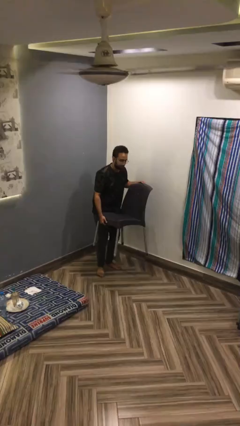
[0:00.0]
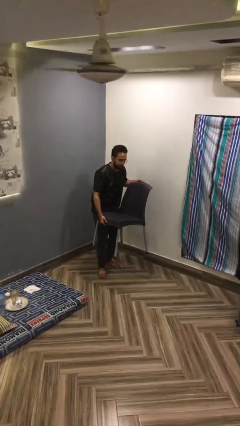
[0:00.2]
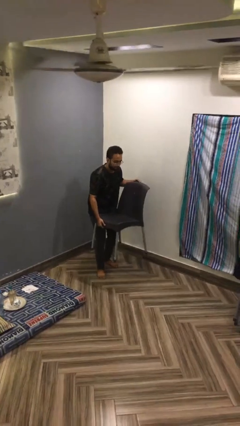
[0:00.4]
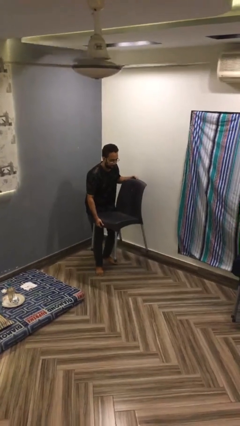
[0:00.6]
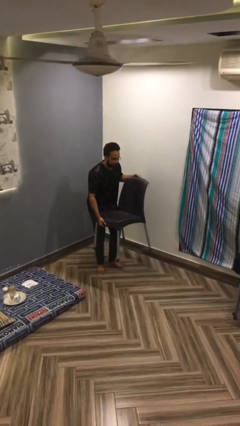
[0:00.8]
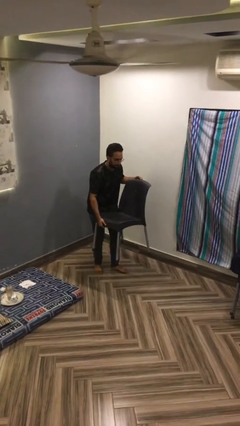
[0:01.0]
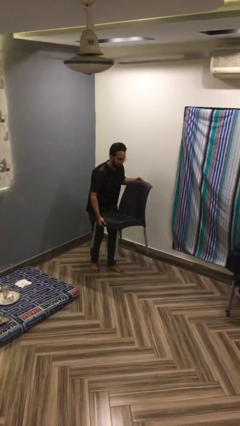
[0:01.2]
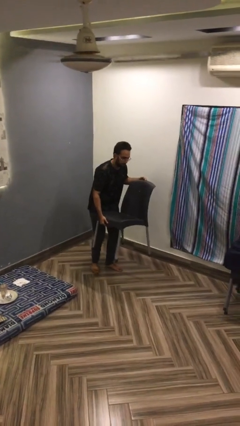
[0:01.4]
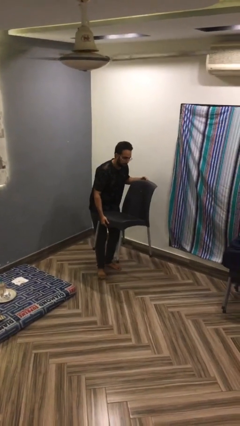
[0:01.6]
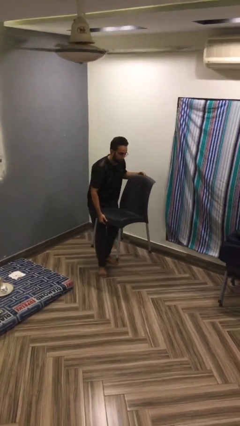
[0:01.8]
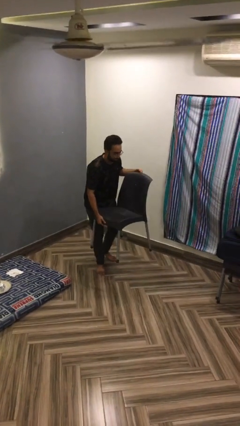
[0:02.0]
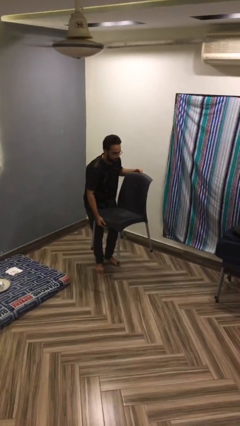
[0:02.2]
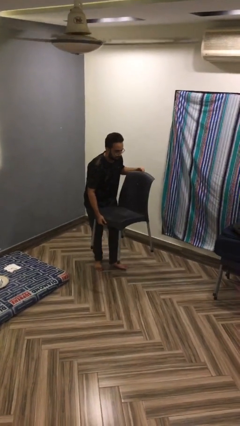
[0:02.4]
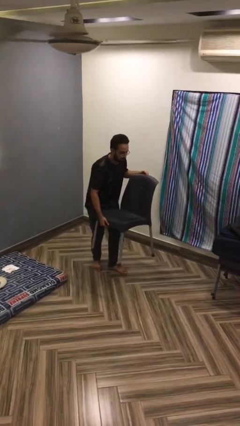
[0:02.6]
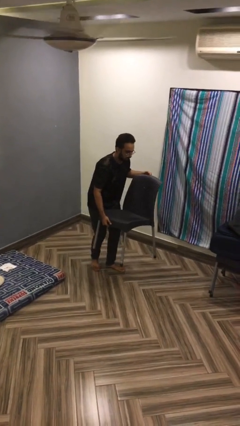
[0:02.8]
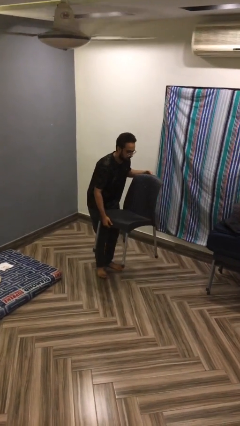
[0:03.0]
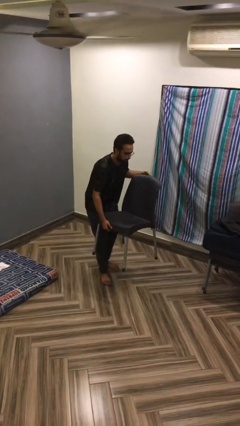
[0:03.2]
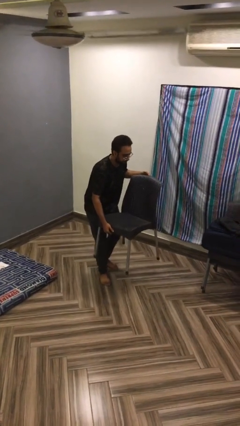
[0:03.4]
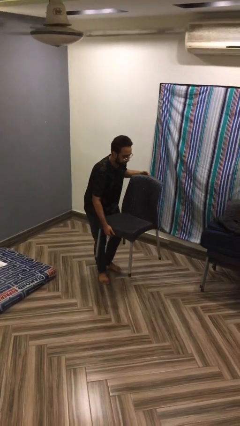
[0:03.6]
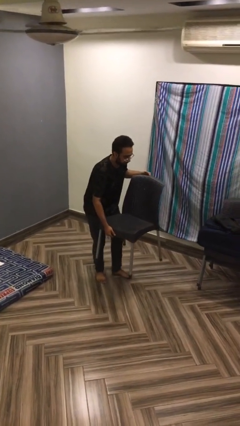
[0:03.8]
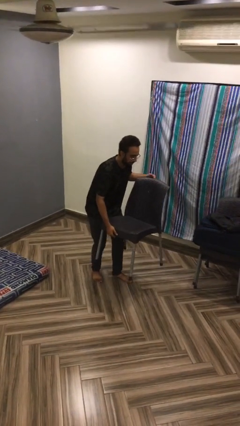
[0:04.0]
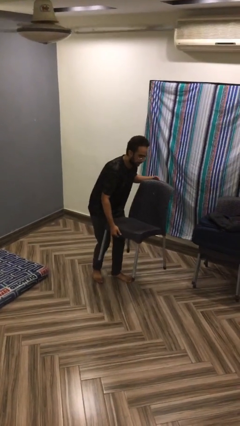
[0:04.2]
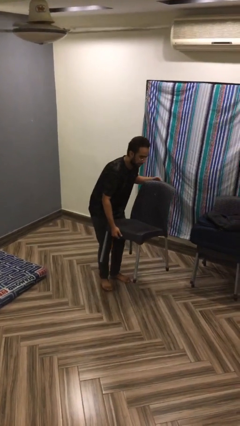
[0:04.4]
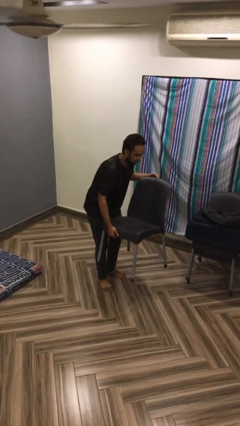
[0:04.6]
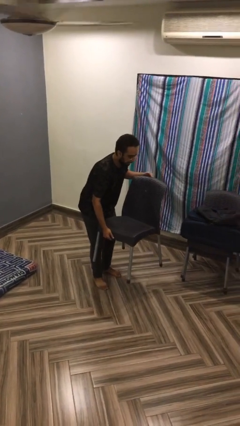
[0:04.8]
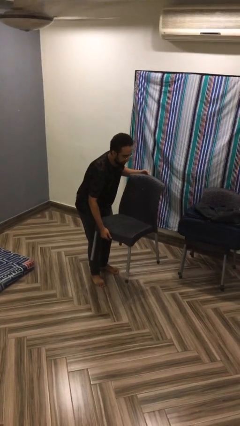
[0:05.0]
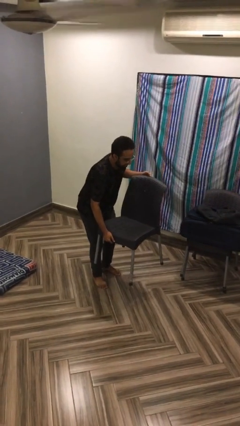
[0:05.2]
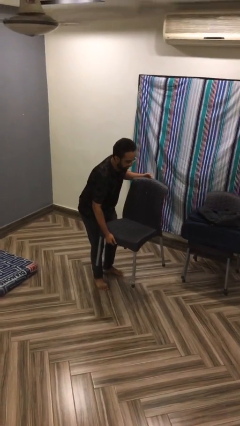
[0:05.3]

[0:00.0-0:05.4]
person carries heavy object

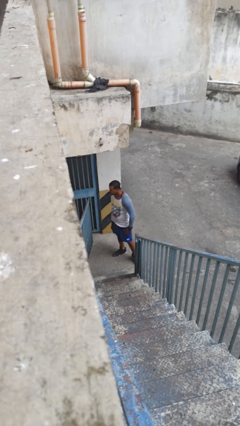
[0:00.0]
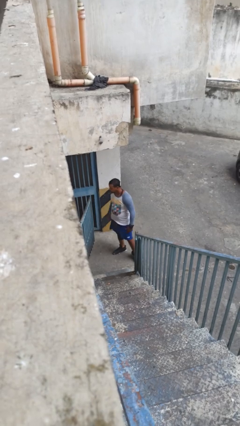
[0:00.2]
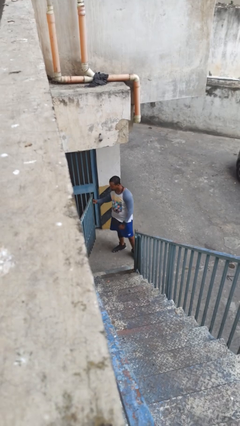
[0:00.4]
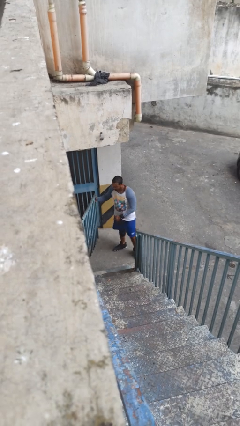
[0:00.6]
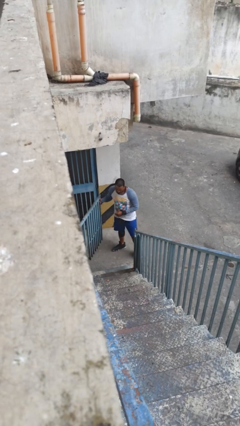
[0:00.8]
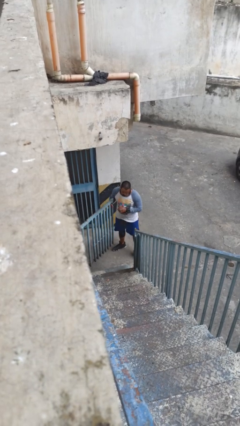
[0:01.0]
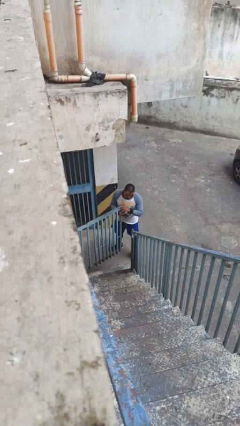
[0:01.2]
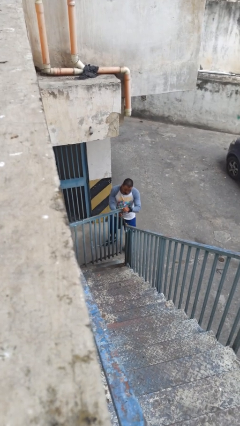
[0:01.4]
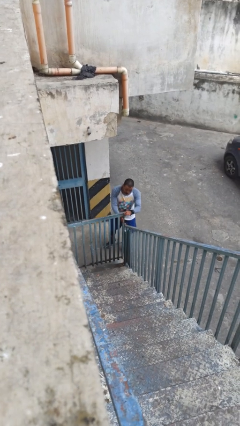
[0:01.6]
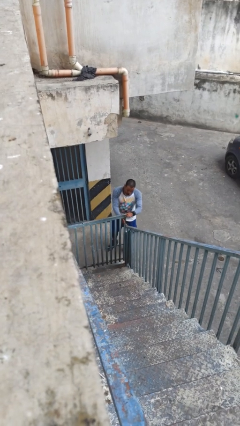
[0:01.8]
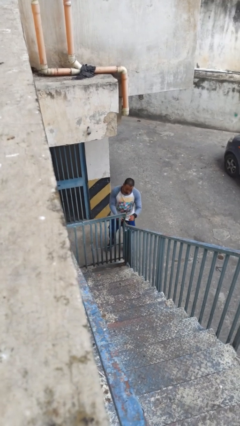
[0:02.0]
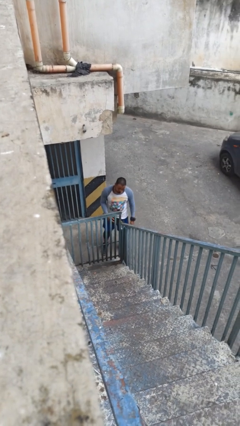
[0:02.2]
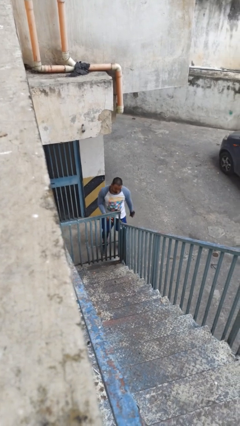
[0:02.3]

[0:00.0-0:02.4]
person closes facility door

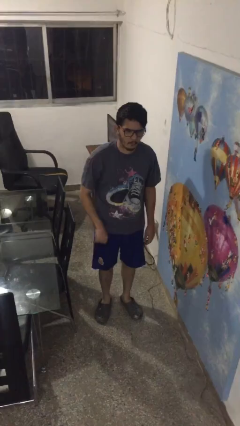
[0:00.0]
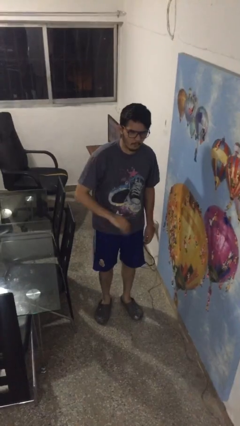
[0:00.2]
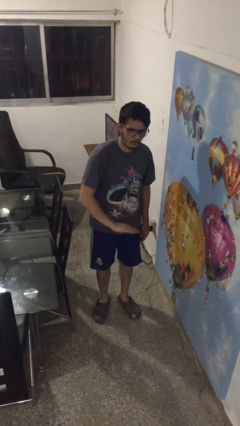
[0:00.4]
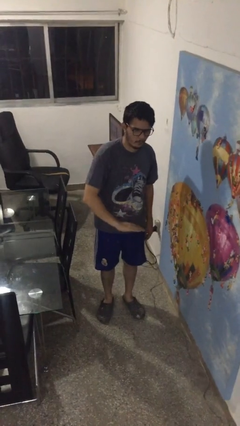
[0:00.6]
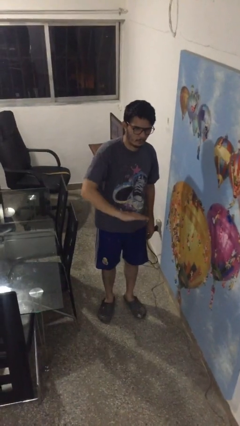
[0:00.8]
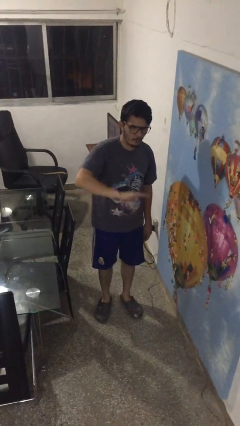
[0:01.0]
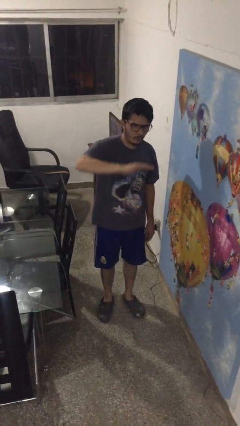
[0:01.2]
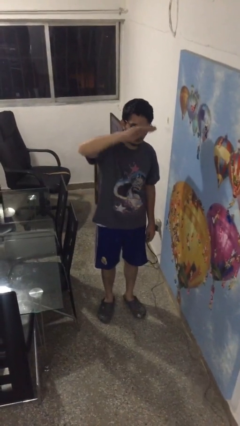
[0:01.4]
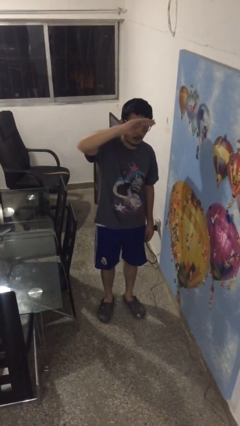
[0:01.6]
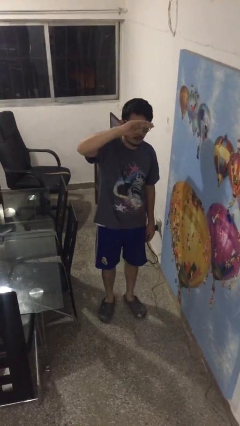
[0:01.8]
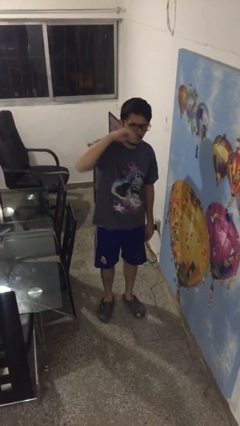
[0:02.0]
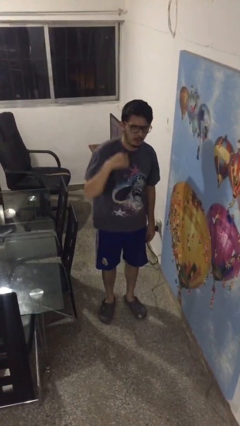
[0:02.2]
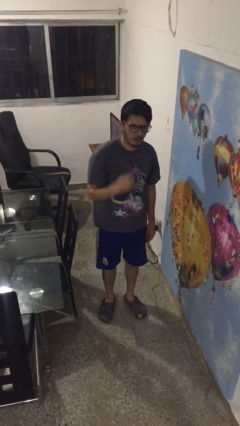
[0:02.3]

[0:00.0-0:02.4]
person gestures swipe up

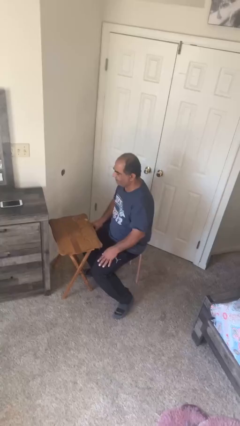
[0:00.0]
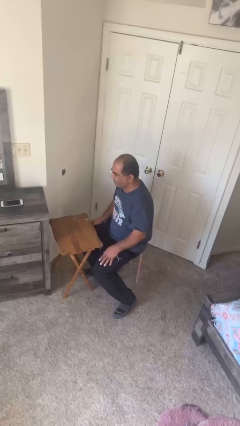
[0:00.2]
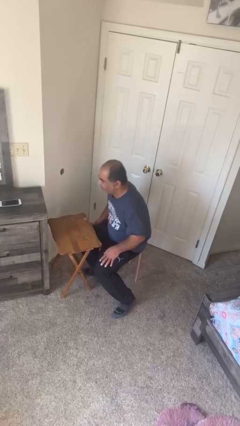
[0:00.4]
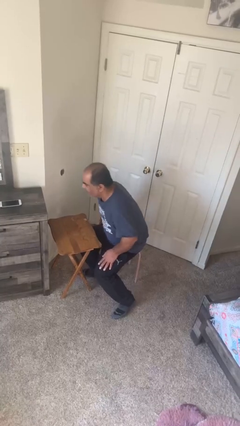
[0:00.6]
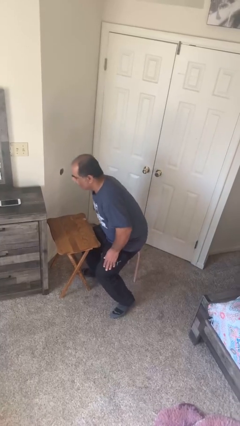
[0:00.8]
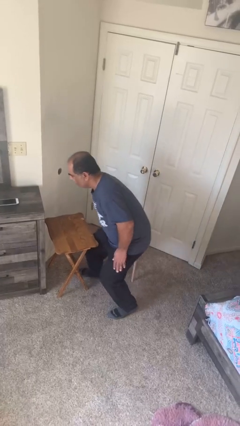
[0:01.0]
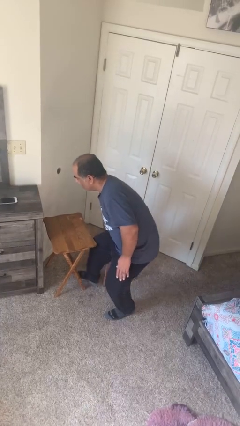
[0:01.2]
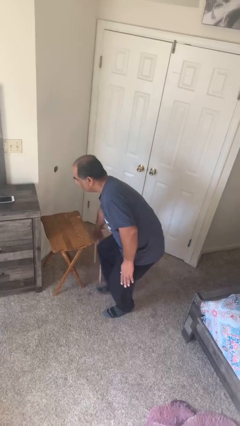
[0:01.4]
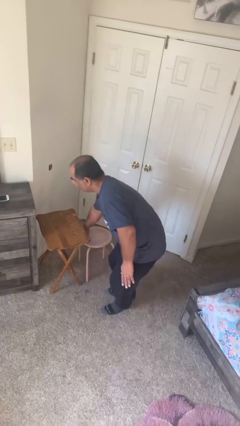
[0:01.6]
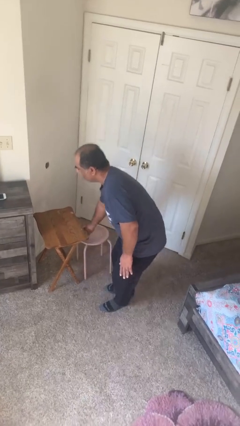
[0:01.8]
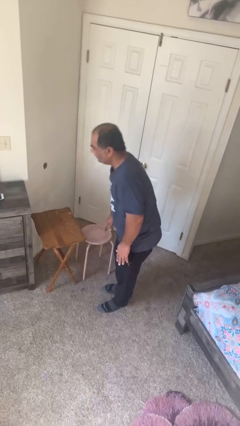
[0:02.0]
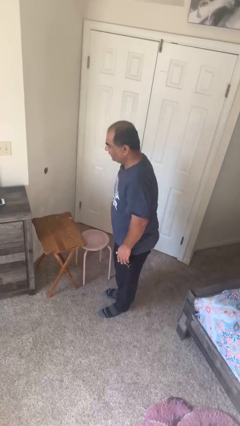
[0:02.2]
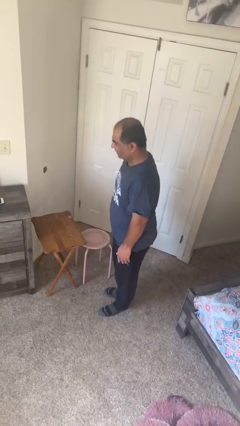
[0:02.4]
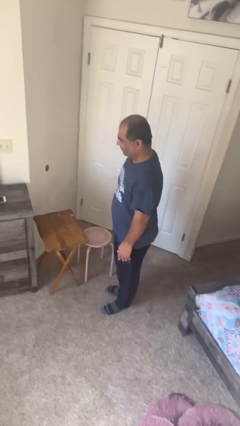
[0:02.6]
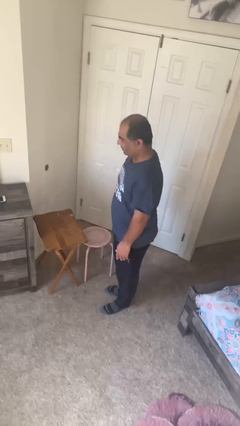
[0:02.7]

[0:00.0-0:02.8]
person stands up

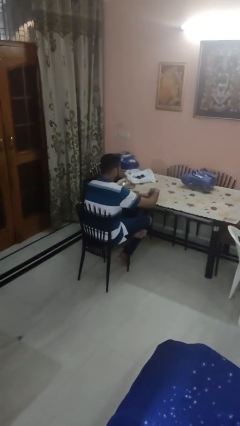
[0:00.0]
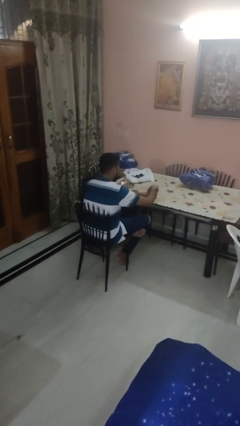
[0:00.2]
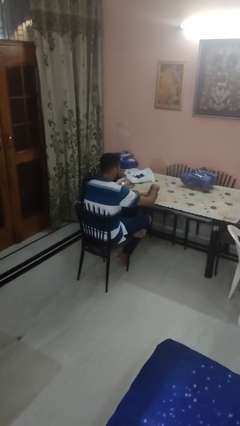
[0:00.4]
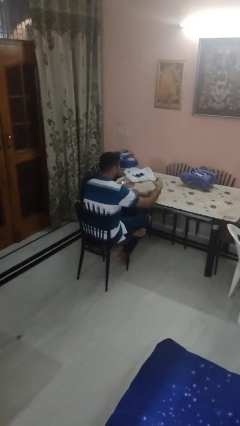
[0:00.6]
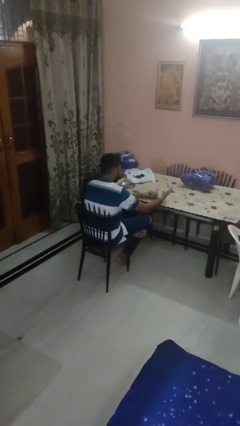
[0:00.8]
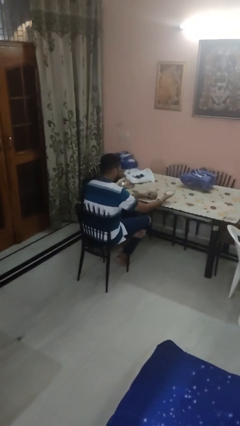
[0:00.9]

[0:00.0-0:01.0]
person opens jar

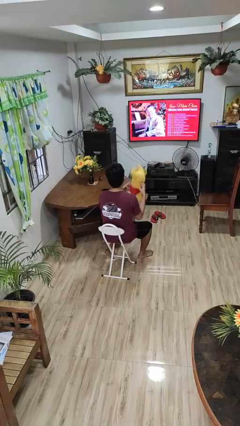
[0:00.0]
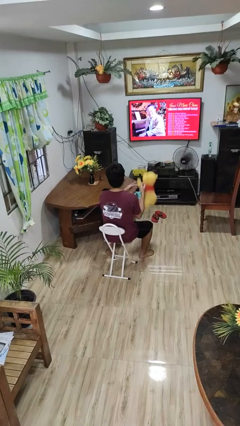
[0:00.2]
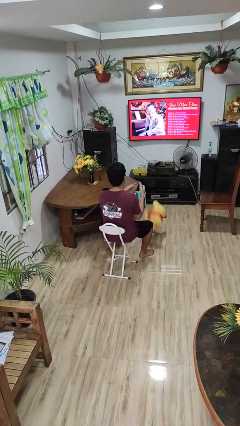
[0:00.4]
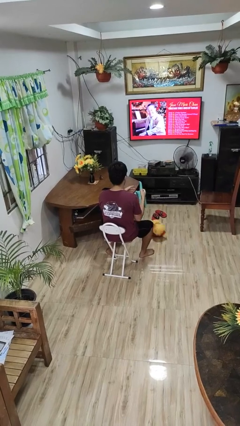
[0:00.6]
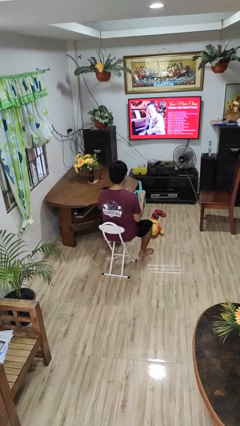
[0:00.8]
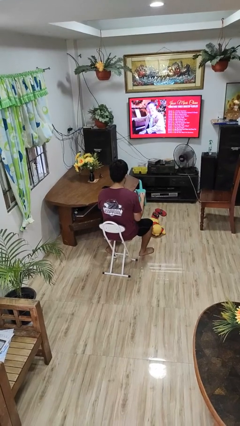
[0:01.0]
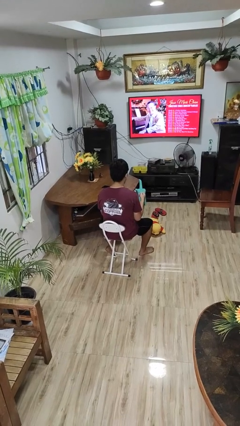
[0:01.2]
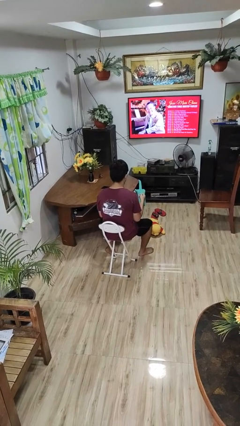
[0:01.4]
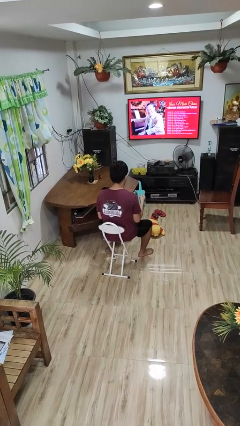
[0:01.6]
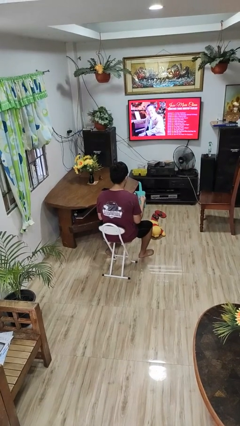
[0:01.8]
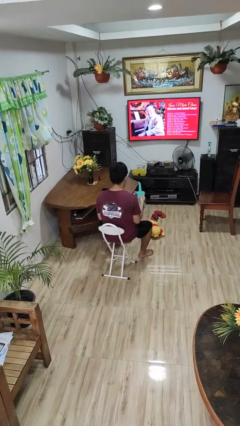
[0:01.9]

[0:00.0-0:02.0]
person drops object

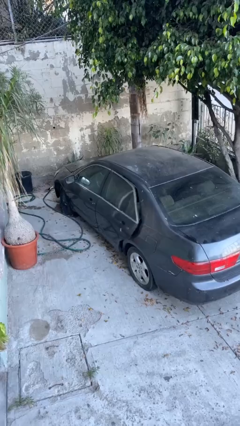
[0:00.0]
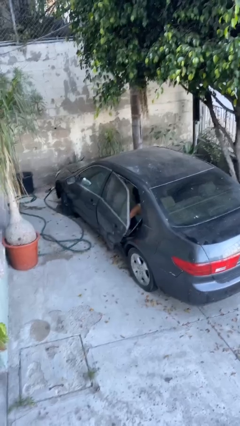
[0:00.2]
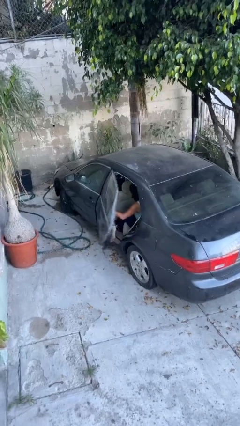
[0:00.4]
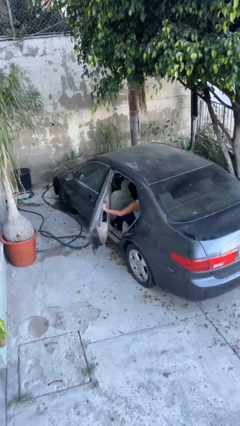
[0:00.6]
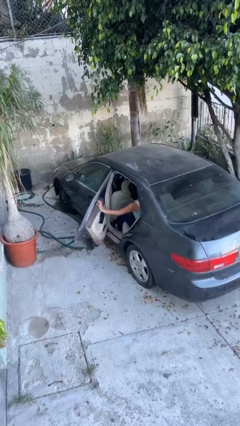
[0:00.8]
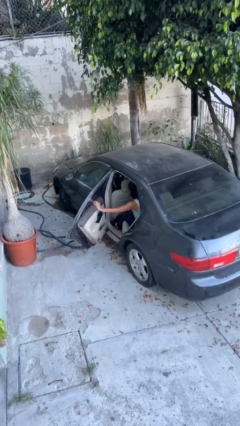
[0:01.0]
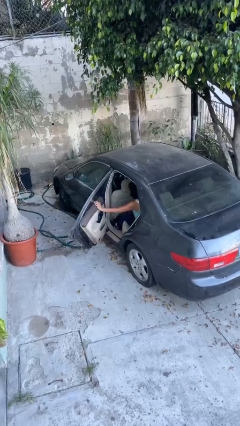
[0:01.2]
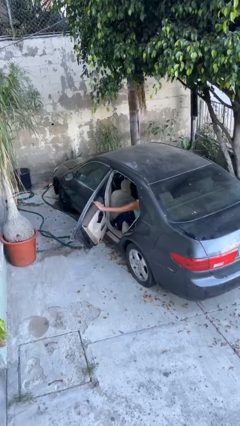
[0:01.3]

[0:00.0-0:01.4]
person opens car door

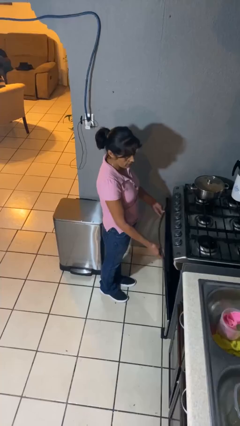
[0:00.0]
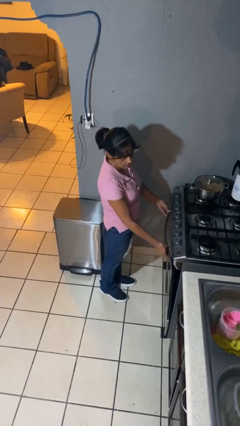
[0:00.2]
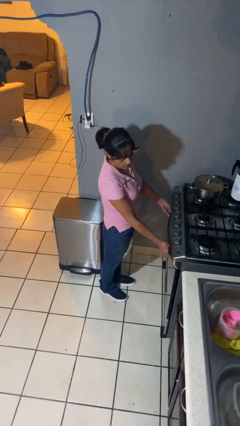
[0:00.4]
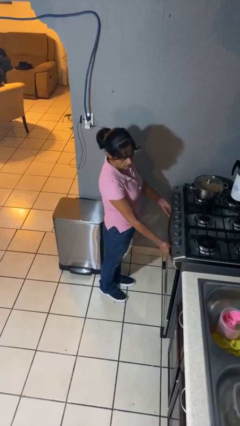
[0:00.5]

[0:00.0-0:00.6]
person closes oven door
